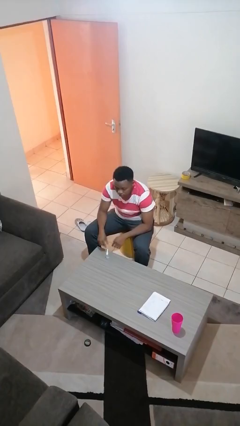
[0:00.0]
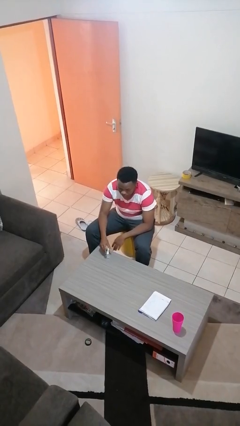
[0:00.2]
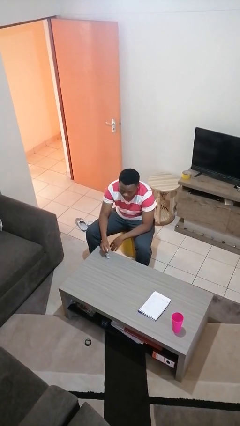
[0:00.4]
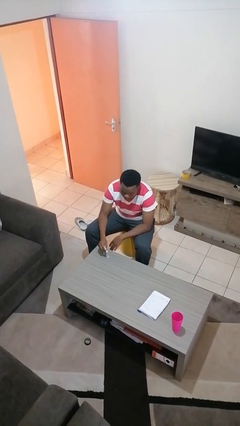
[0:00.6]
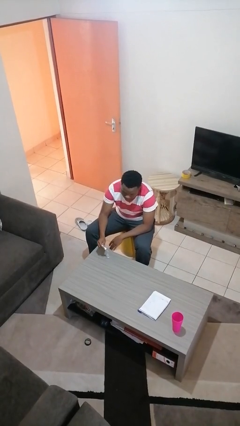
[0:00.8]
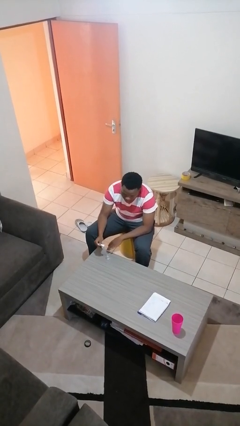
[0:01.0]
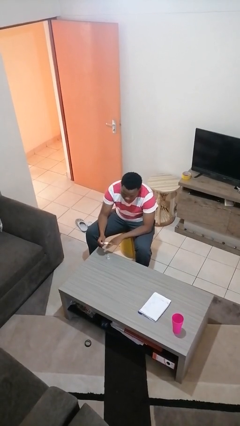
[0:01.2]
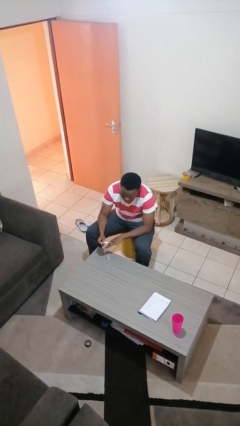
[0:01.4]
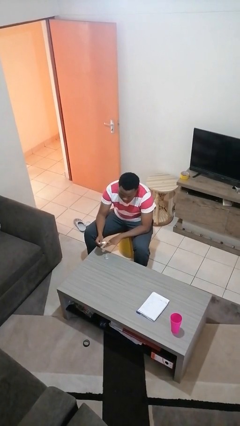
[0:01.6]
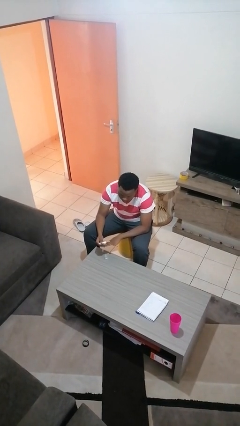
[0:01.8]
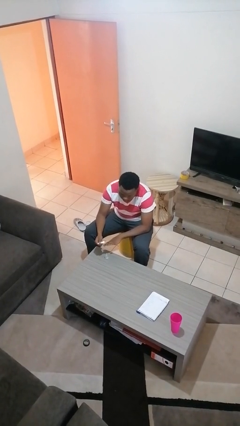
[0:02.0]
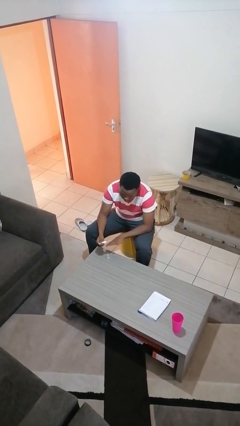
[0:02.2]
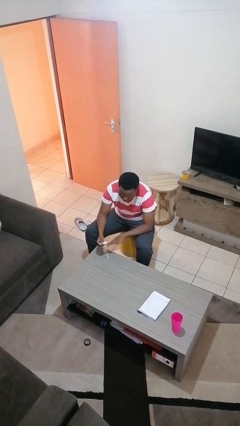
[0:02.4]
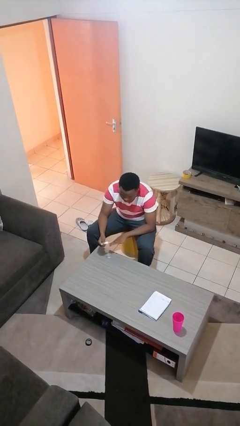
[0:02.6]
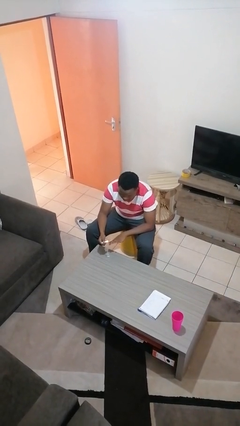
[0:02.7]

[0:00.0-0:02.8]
person paints fingernails

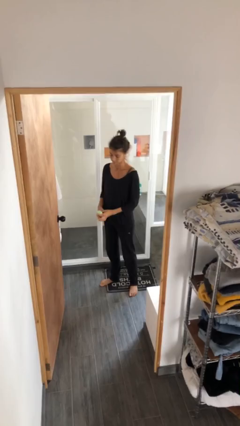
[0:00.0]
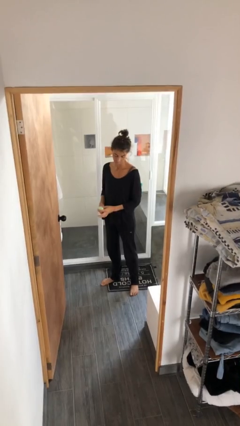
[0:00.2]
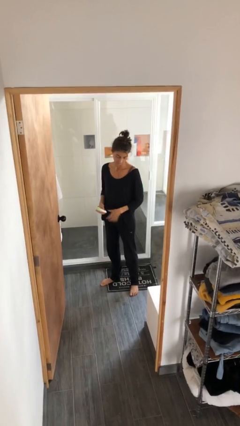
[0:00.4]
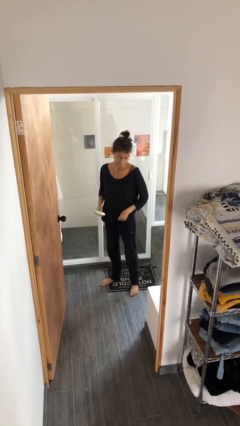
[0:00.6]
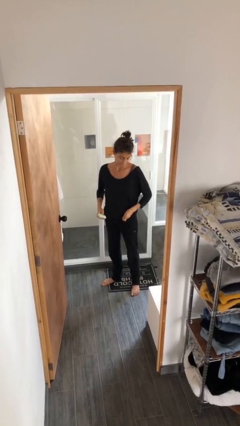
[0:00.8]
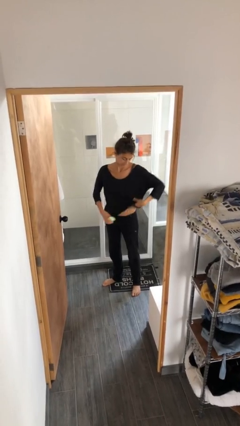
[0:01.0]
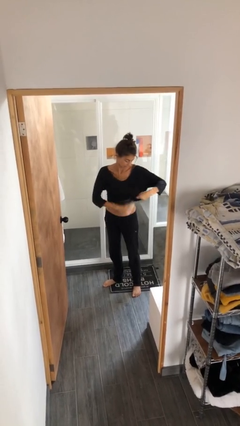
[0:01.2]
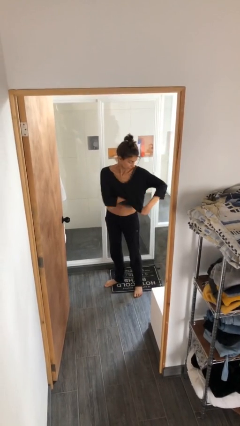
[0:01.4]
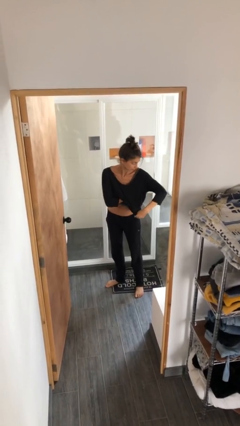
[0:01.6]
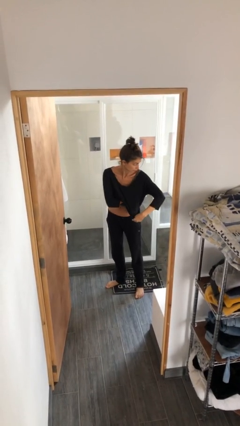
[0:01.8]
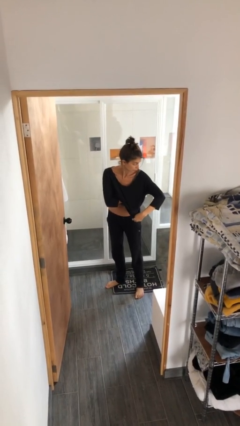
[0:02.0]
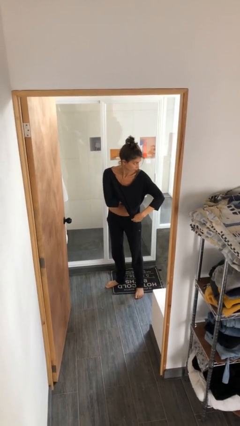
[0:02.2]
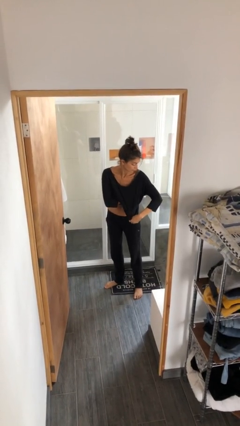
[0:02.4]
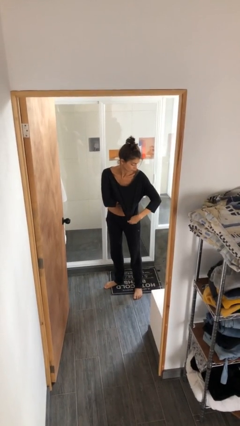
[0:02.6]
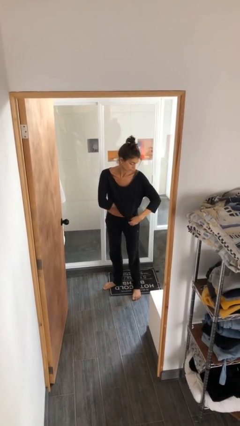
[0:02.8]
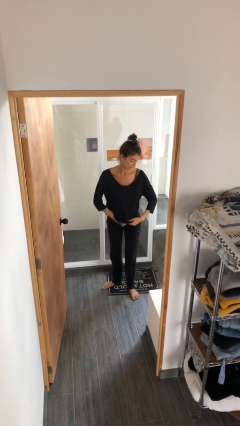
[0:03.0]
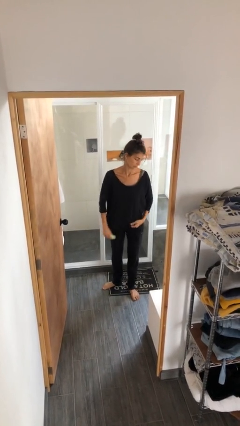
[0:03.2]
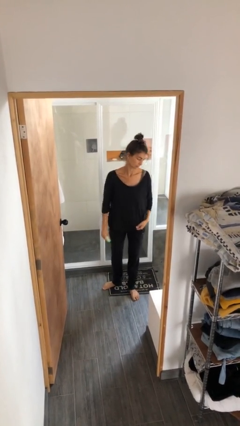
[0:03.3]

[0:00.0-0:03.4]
person applies deodorant

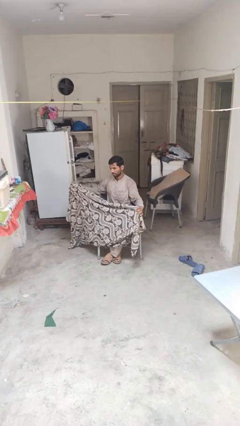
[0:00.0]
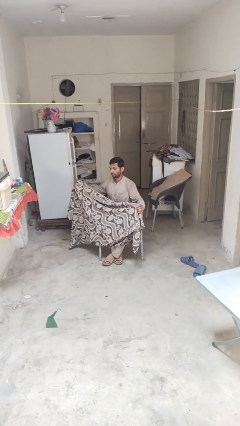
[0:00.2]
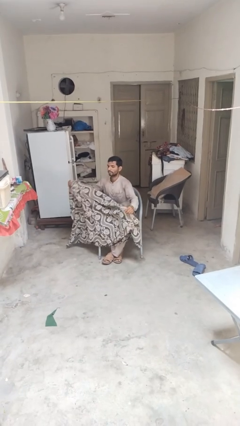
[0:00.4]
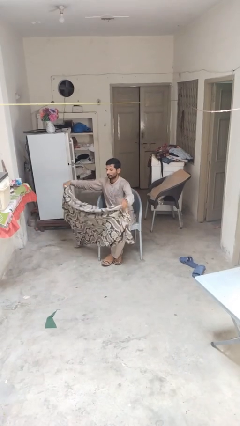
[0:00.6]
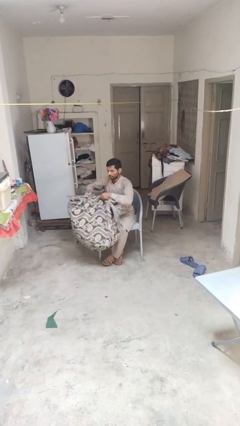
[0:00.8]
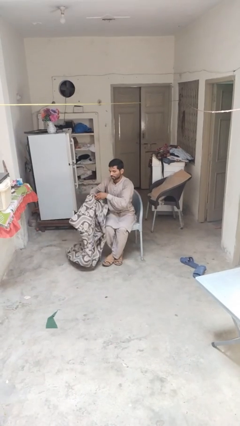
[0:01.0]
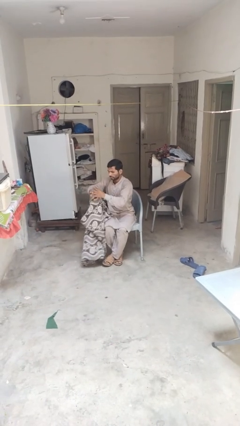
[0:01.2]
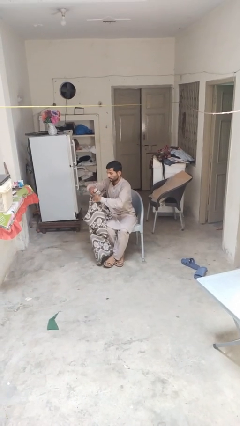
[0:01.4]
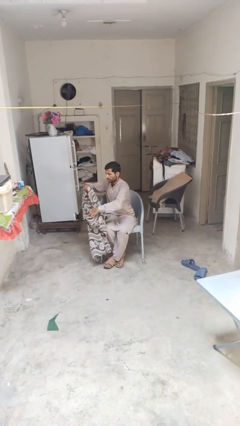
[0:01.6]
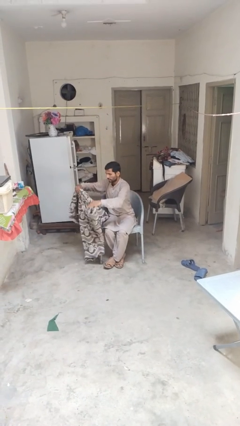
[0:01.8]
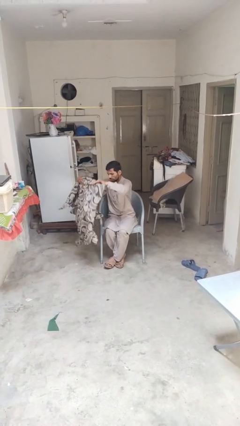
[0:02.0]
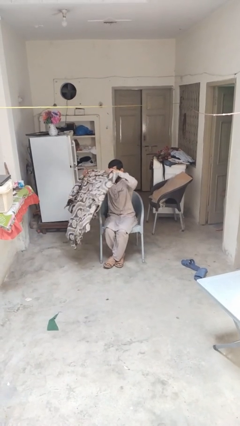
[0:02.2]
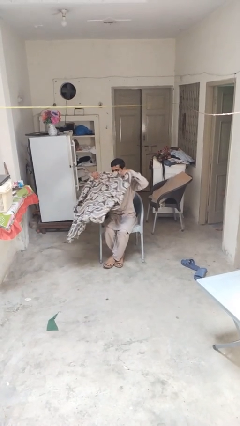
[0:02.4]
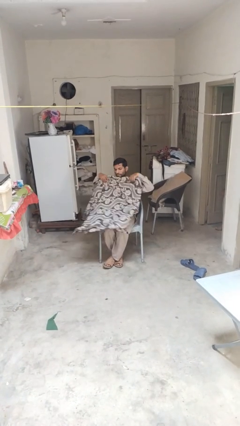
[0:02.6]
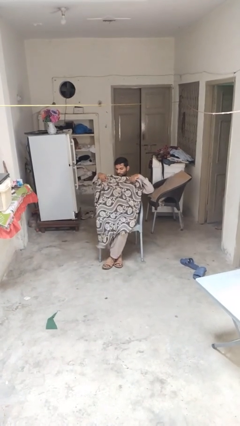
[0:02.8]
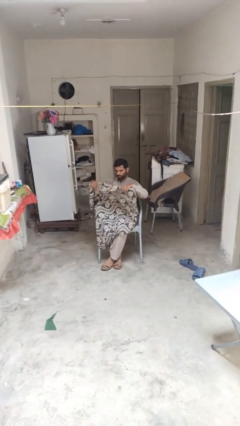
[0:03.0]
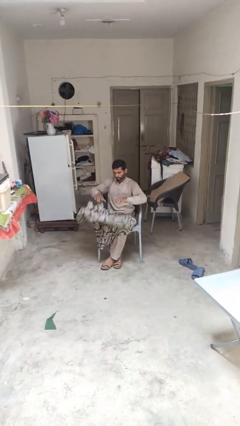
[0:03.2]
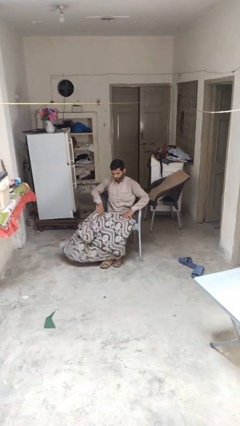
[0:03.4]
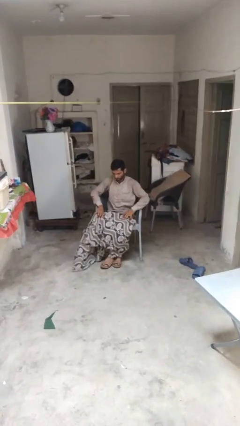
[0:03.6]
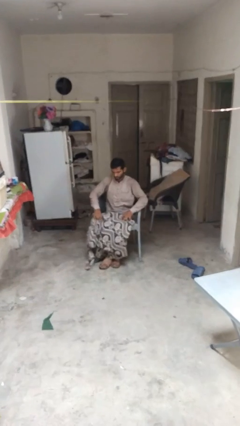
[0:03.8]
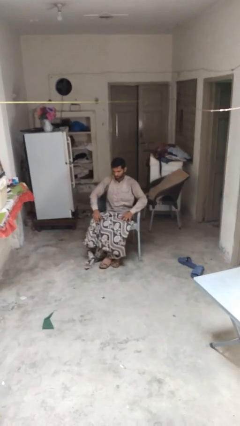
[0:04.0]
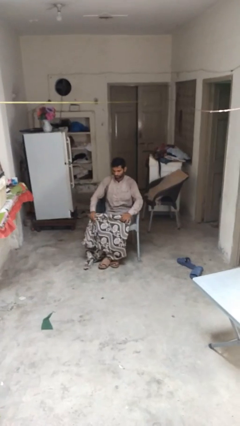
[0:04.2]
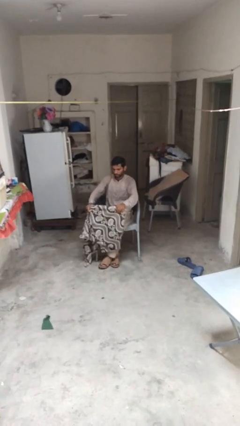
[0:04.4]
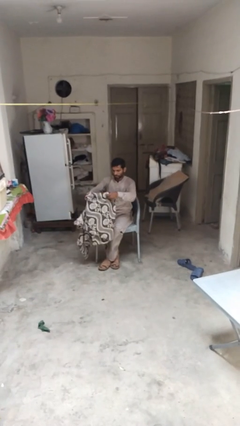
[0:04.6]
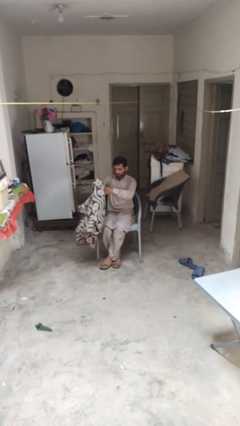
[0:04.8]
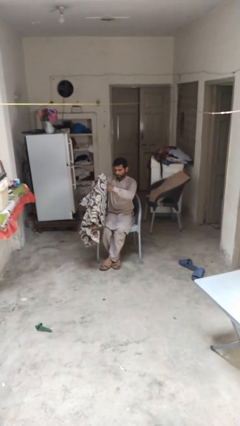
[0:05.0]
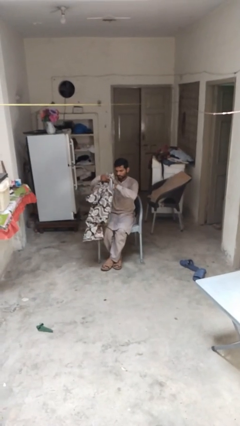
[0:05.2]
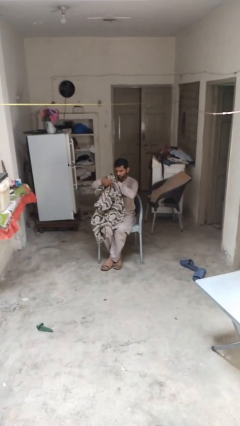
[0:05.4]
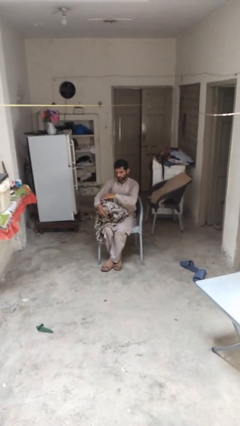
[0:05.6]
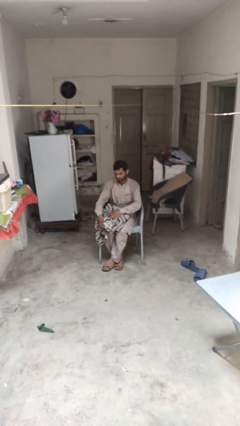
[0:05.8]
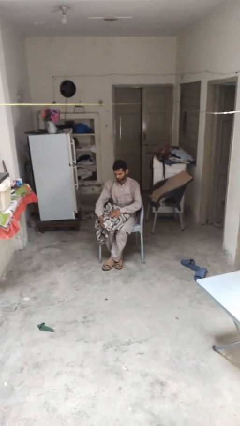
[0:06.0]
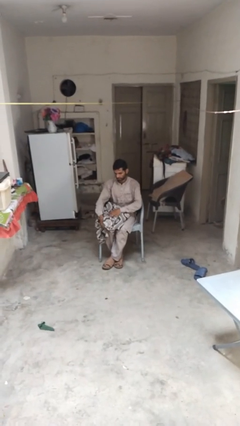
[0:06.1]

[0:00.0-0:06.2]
person folds blanket

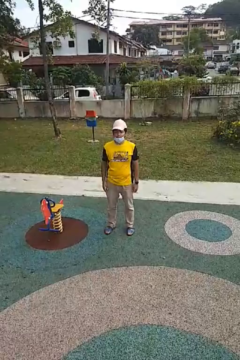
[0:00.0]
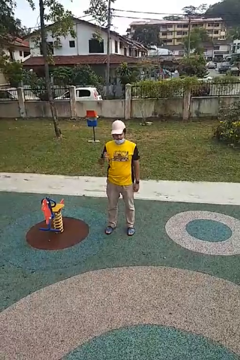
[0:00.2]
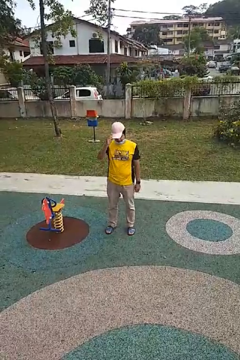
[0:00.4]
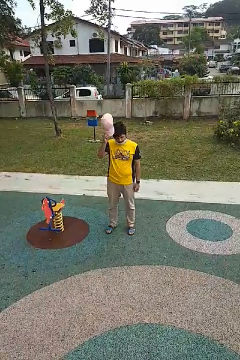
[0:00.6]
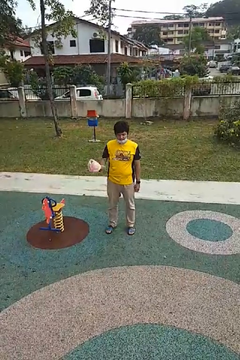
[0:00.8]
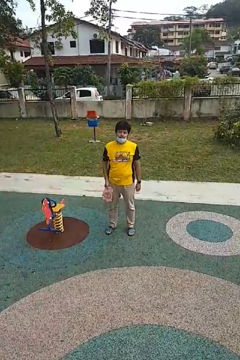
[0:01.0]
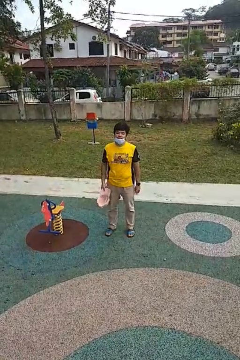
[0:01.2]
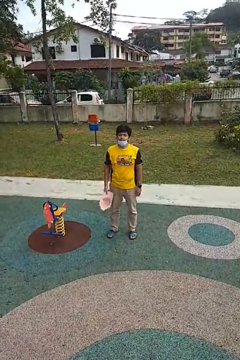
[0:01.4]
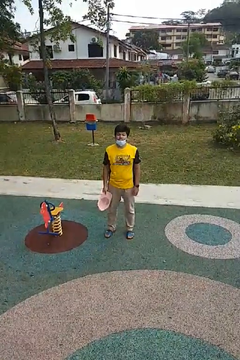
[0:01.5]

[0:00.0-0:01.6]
person takes off hat

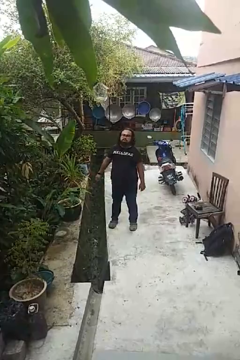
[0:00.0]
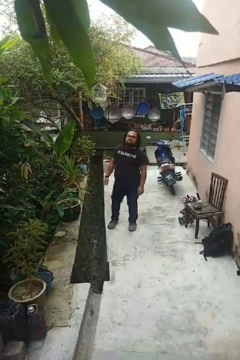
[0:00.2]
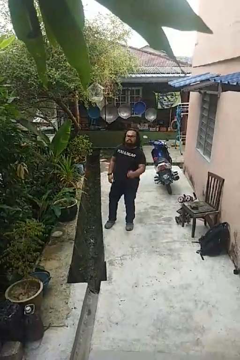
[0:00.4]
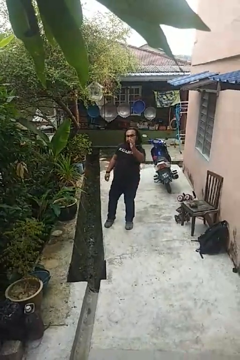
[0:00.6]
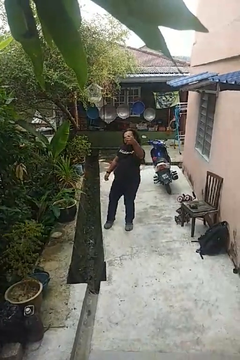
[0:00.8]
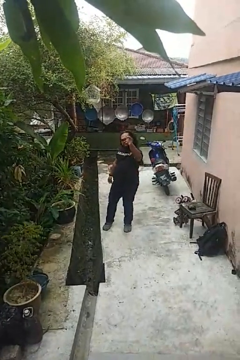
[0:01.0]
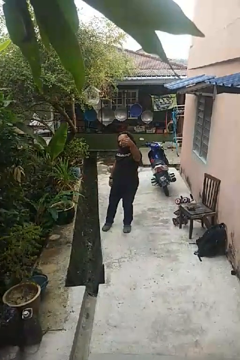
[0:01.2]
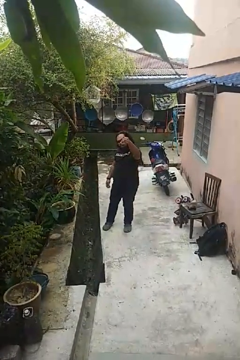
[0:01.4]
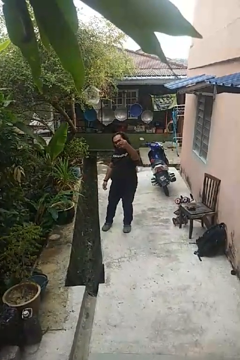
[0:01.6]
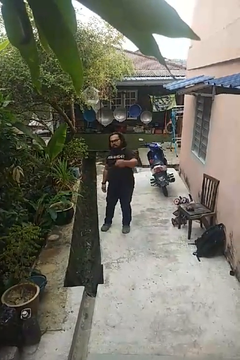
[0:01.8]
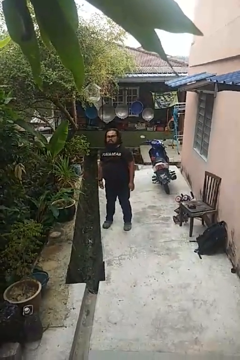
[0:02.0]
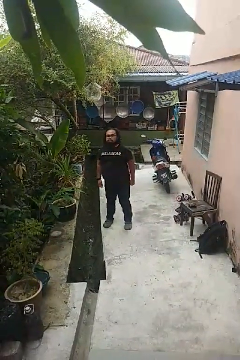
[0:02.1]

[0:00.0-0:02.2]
person gestures come here

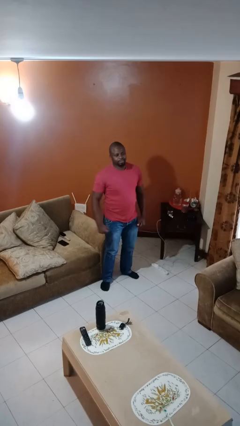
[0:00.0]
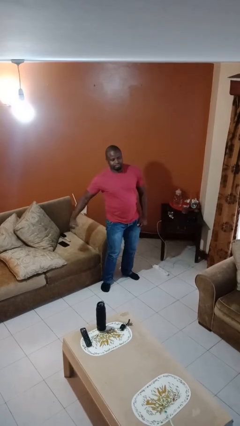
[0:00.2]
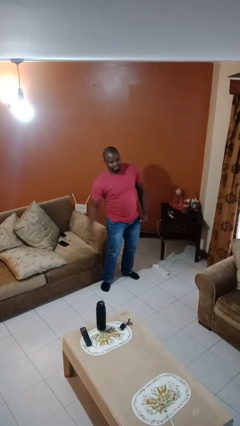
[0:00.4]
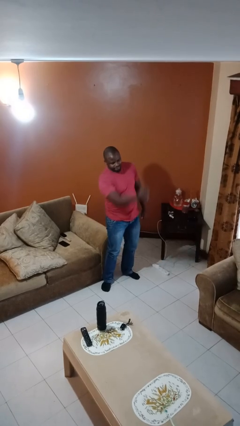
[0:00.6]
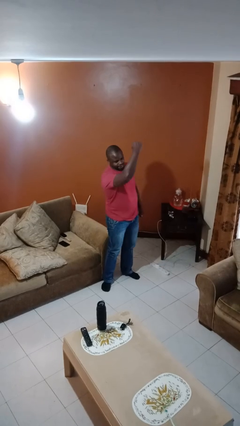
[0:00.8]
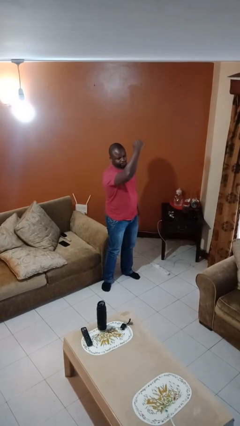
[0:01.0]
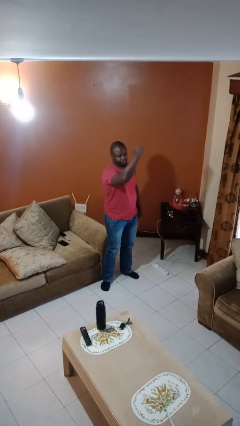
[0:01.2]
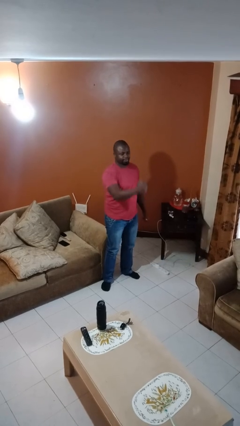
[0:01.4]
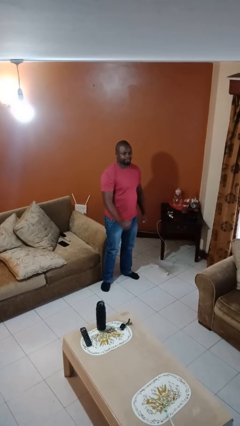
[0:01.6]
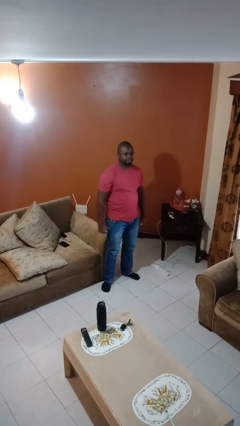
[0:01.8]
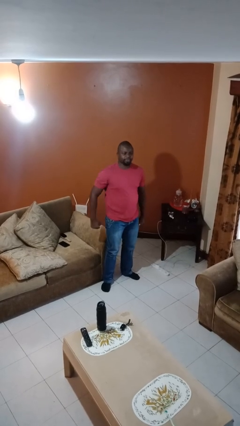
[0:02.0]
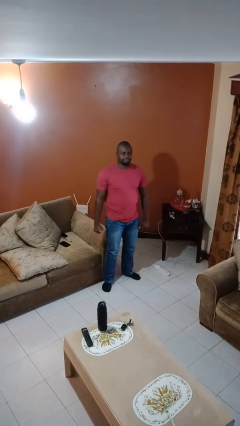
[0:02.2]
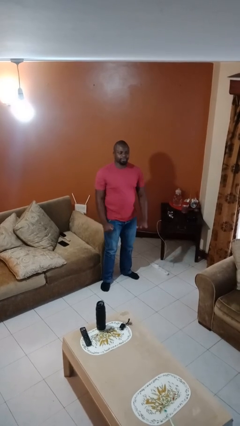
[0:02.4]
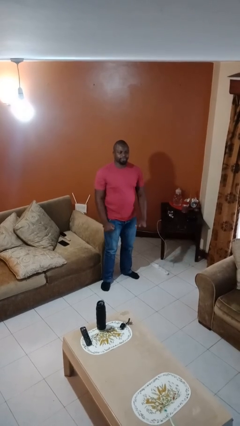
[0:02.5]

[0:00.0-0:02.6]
person punches
